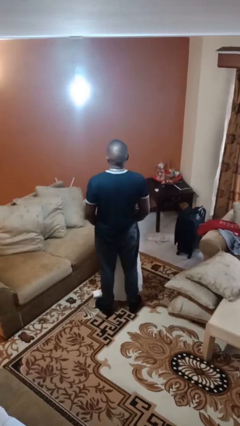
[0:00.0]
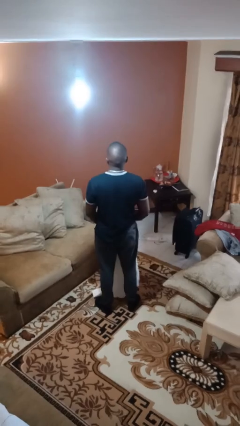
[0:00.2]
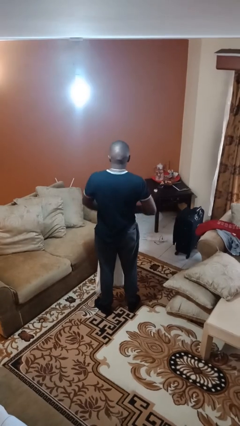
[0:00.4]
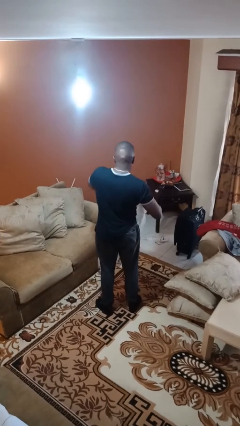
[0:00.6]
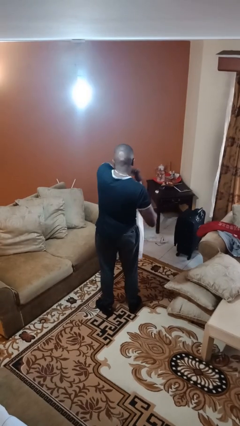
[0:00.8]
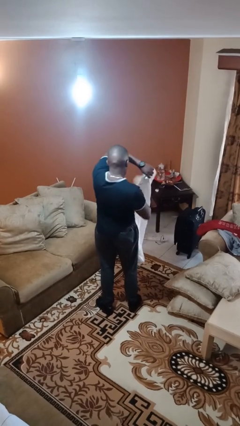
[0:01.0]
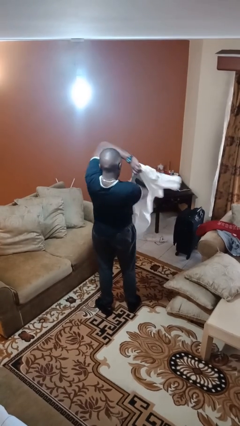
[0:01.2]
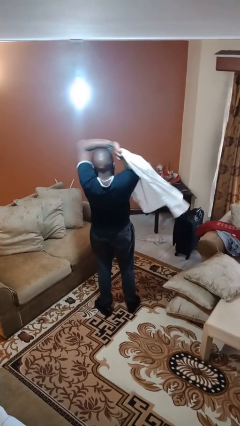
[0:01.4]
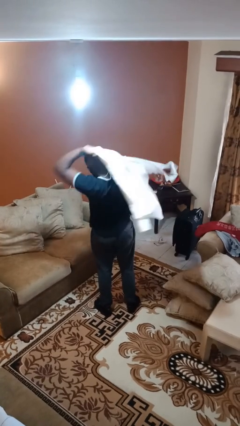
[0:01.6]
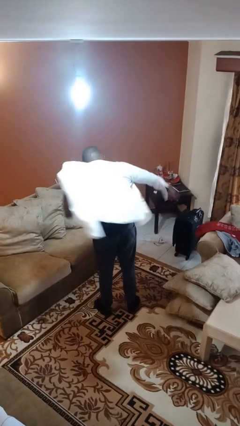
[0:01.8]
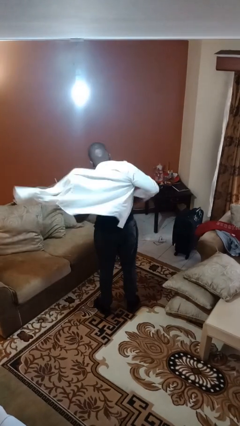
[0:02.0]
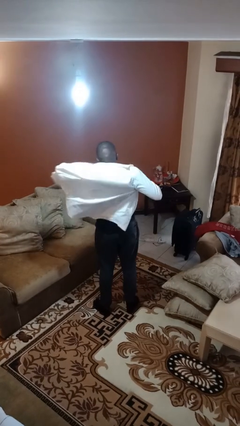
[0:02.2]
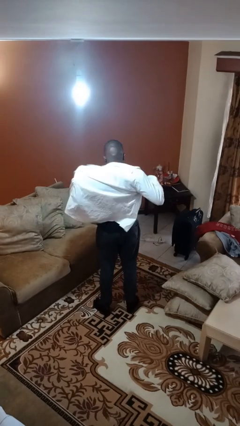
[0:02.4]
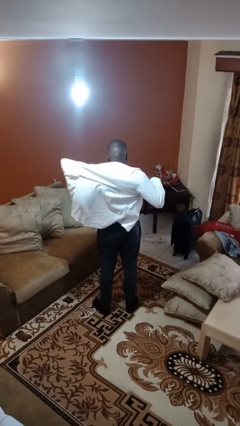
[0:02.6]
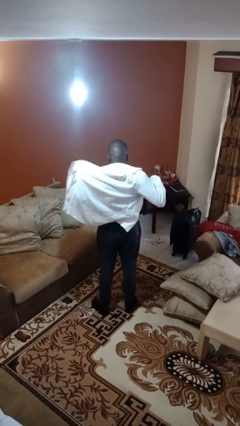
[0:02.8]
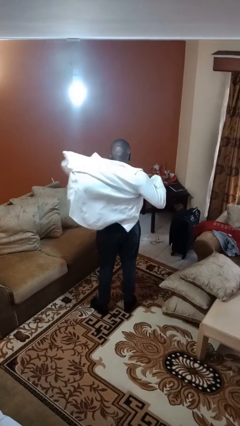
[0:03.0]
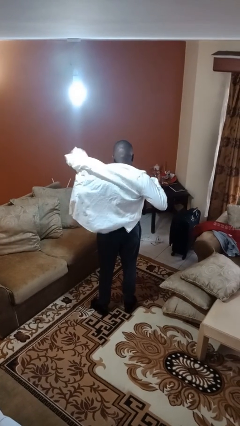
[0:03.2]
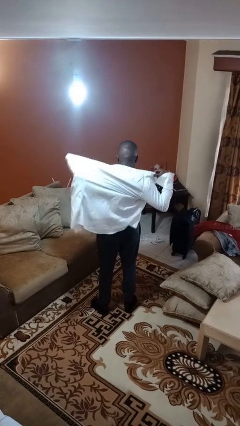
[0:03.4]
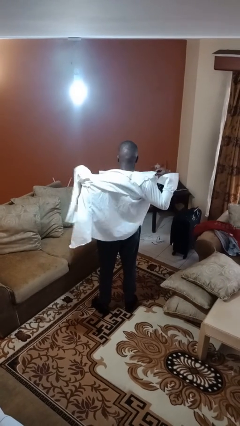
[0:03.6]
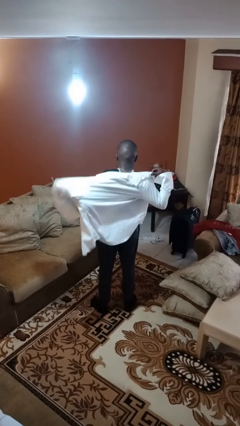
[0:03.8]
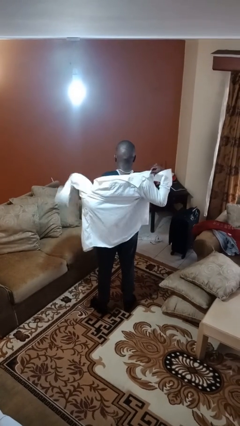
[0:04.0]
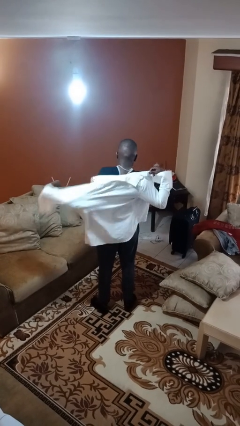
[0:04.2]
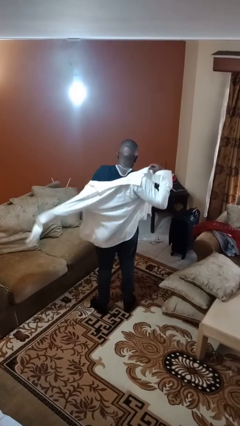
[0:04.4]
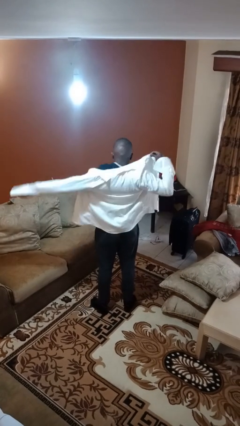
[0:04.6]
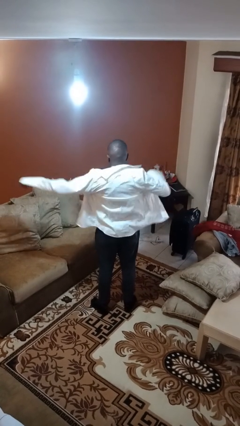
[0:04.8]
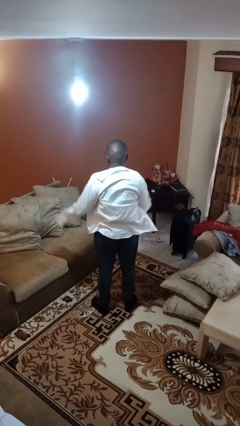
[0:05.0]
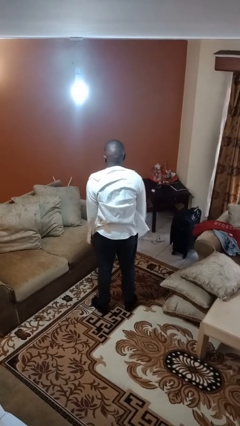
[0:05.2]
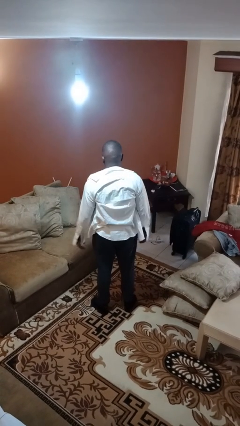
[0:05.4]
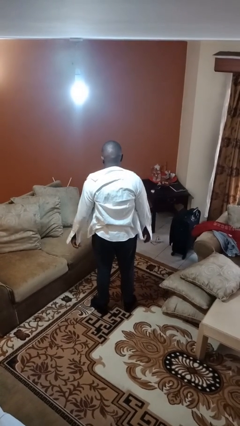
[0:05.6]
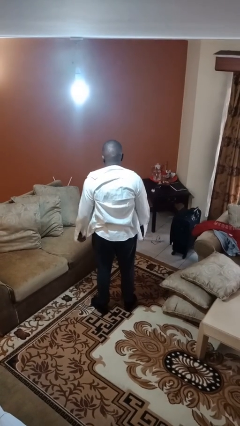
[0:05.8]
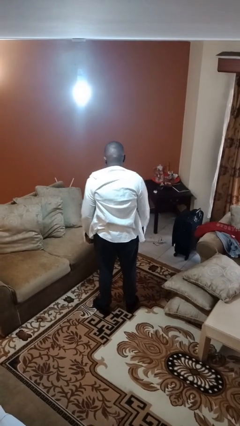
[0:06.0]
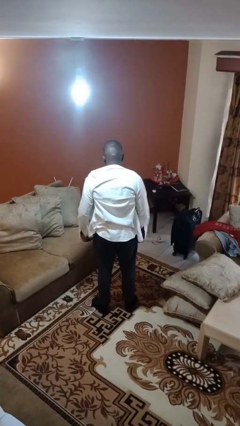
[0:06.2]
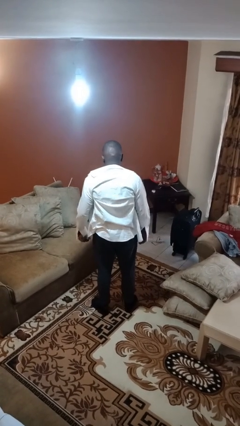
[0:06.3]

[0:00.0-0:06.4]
person puts on shirt

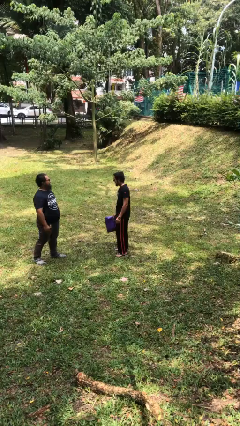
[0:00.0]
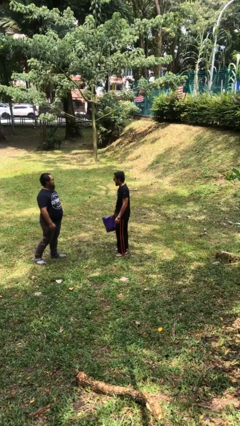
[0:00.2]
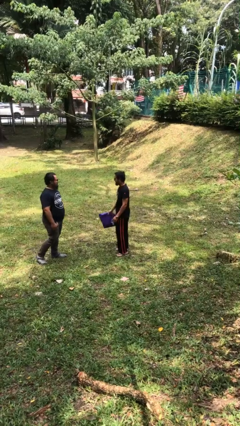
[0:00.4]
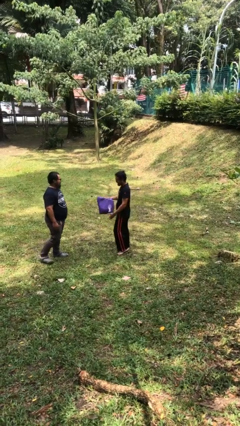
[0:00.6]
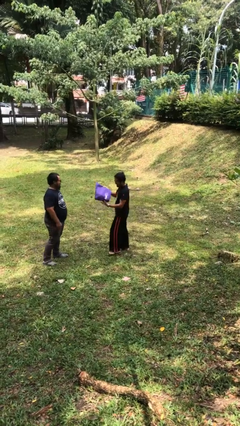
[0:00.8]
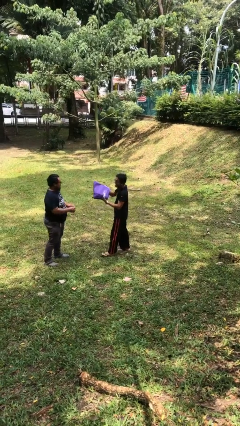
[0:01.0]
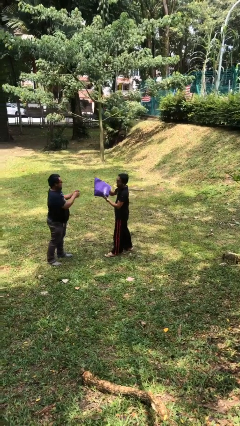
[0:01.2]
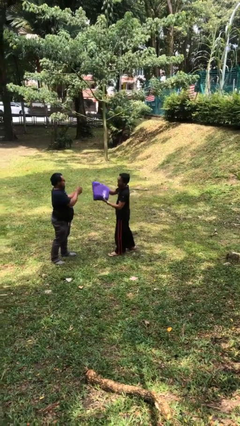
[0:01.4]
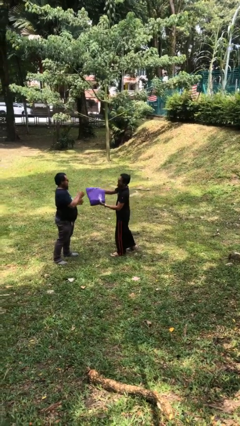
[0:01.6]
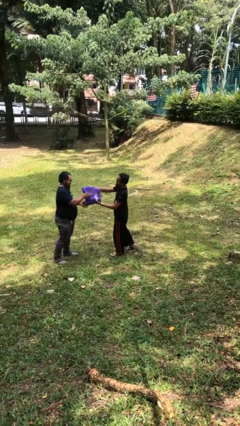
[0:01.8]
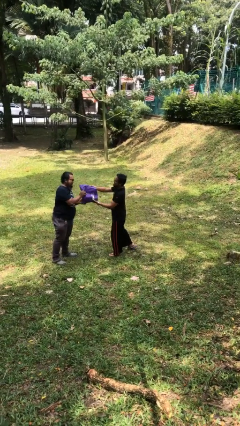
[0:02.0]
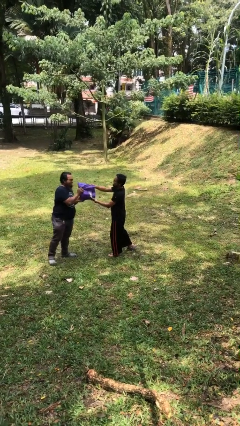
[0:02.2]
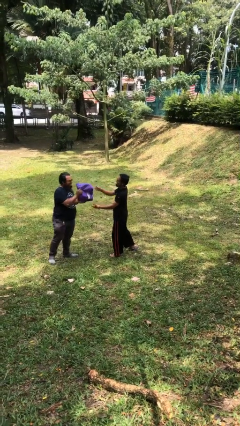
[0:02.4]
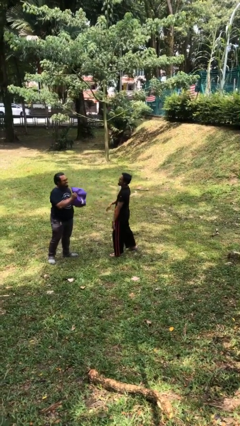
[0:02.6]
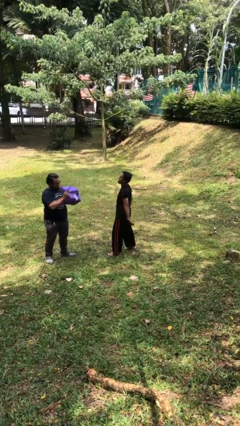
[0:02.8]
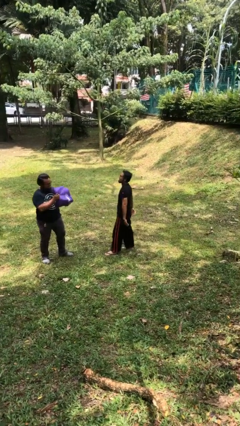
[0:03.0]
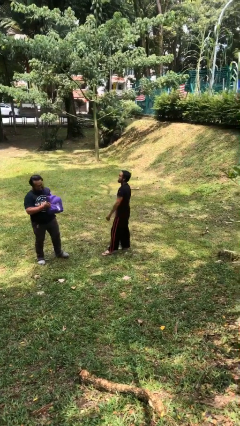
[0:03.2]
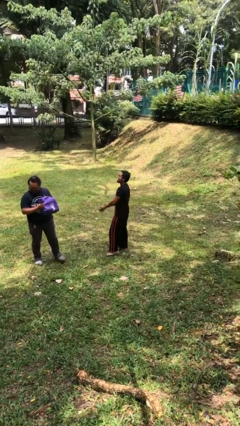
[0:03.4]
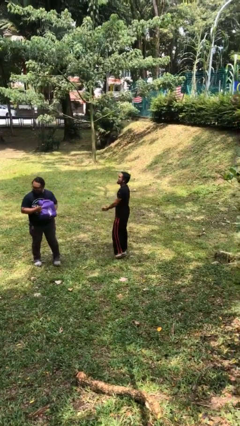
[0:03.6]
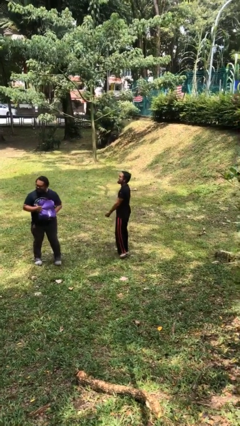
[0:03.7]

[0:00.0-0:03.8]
person transfers object to person

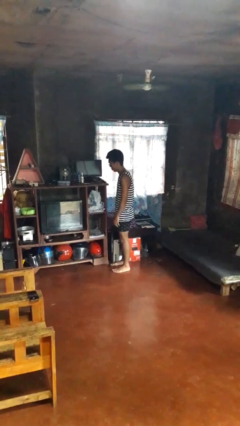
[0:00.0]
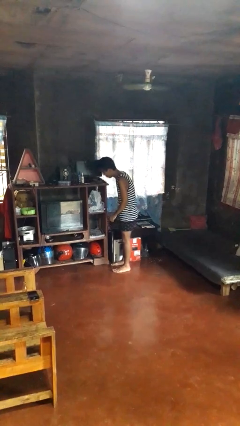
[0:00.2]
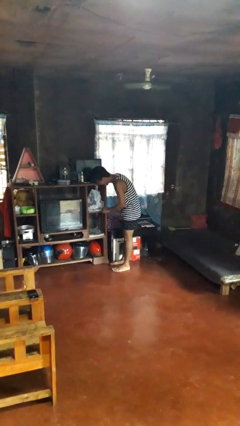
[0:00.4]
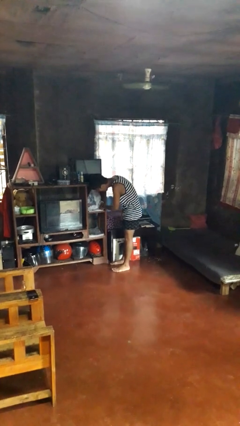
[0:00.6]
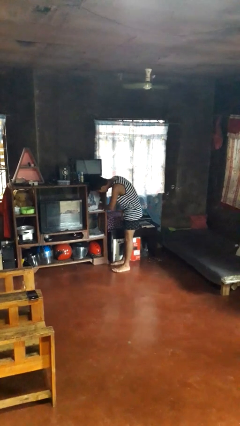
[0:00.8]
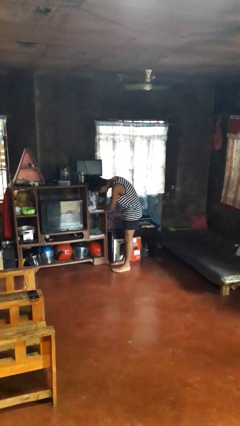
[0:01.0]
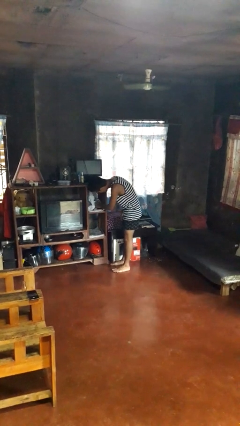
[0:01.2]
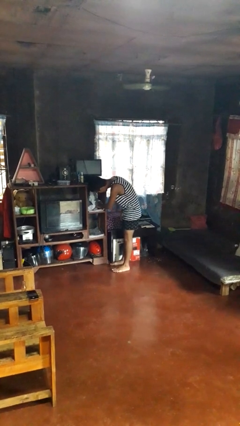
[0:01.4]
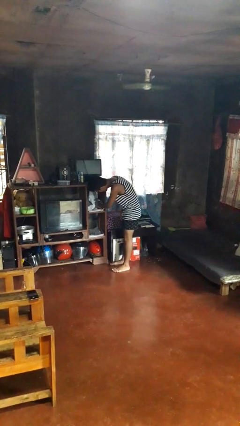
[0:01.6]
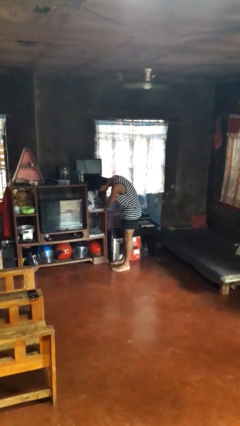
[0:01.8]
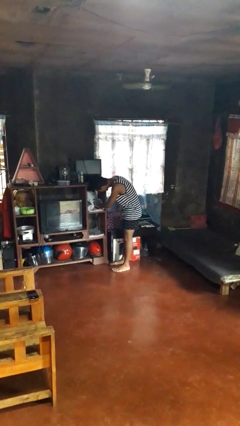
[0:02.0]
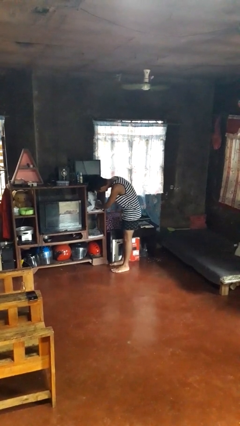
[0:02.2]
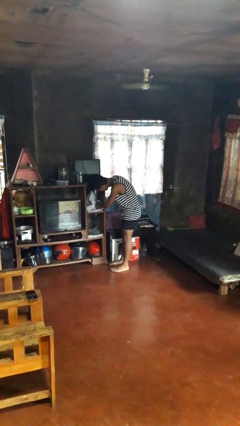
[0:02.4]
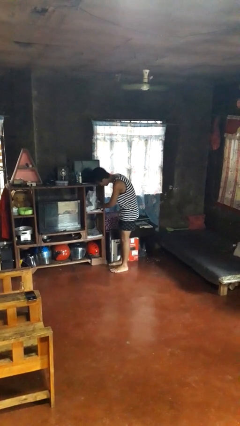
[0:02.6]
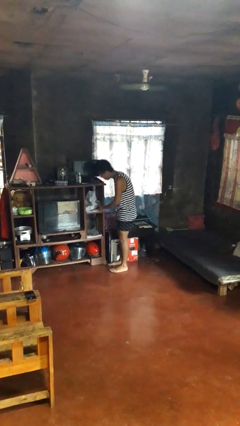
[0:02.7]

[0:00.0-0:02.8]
person searches in cabinet

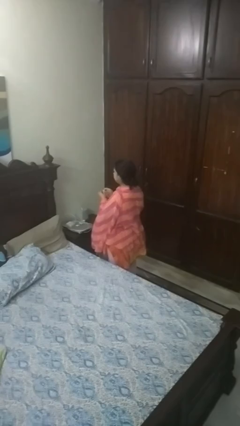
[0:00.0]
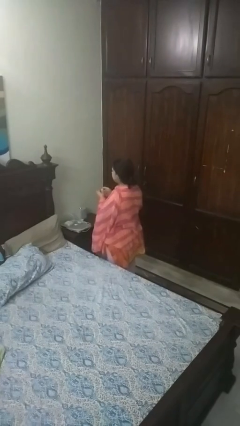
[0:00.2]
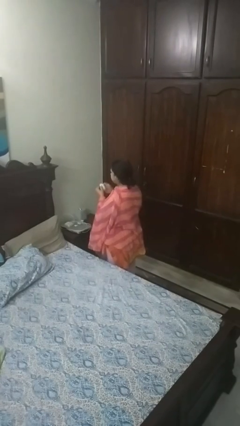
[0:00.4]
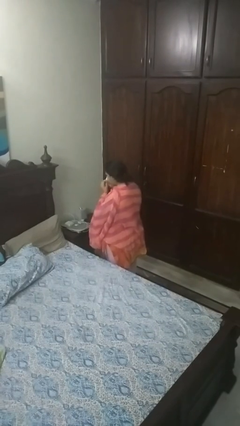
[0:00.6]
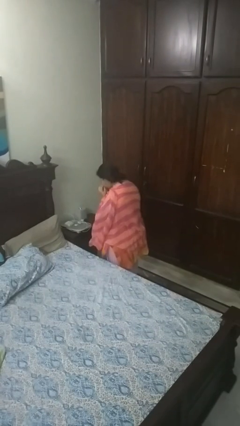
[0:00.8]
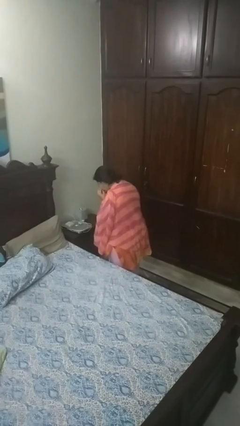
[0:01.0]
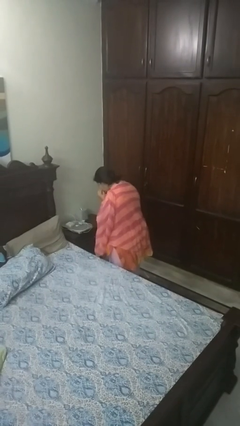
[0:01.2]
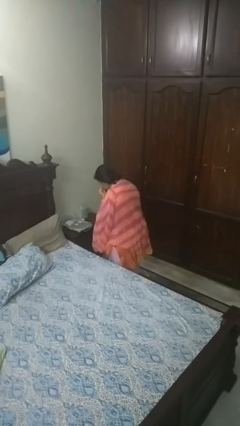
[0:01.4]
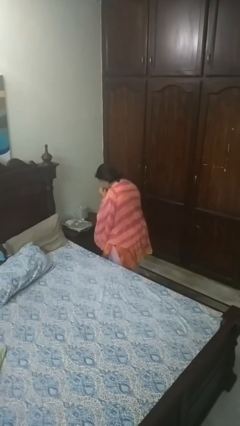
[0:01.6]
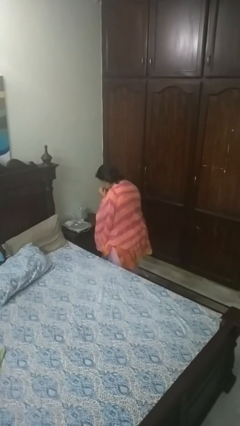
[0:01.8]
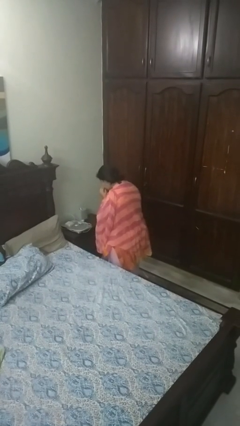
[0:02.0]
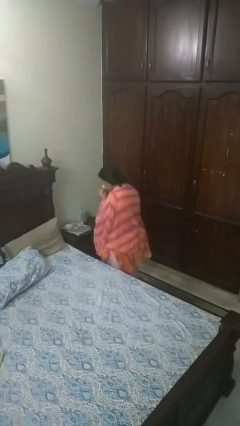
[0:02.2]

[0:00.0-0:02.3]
person blows nose

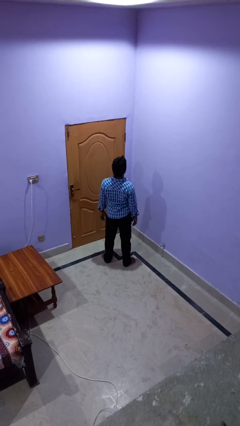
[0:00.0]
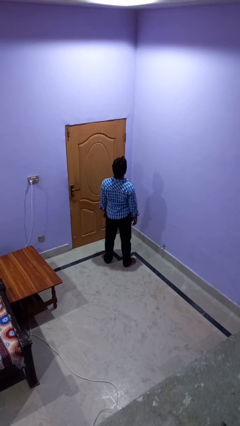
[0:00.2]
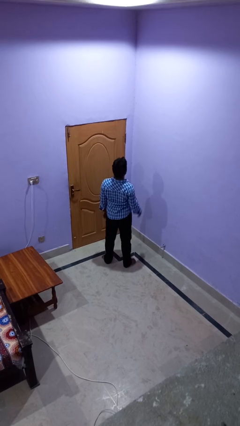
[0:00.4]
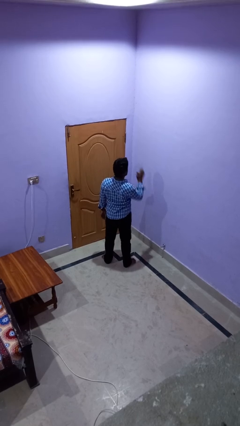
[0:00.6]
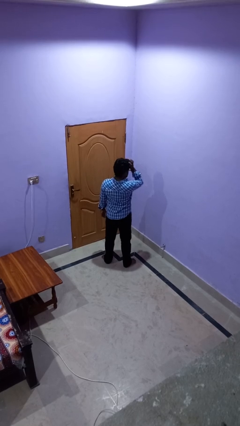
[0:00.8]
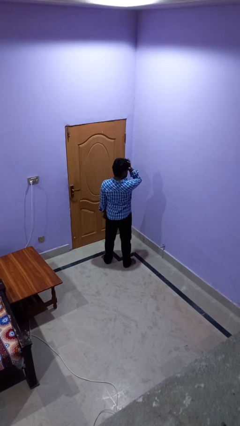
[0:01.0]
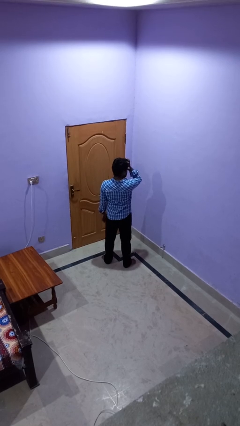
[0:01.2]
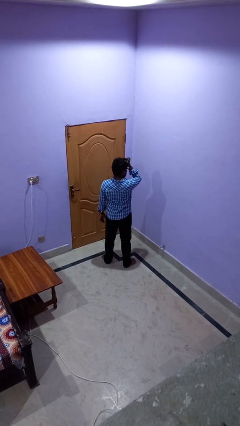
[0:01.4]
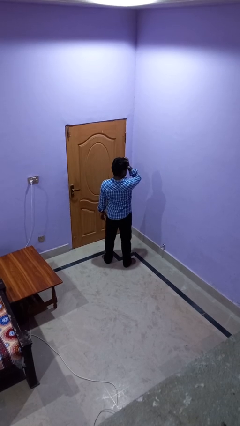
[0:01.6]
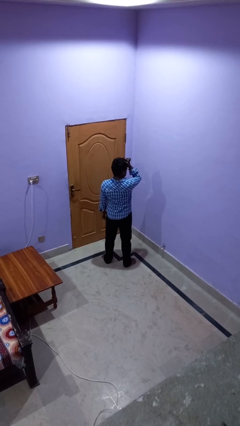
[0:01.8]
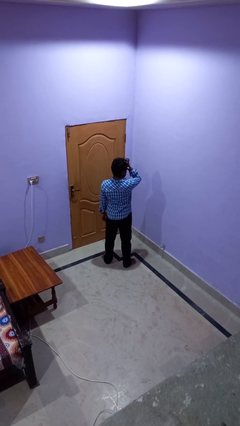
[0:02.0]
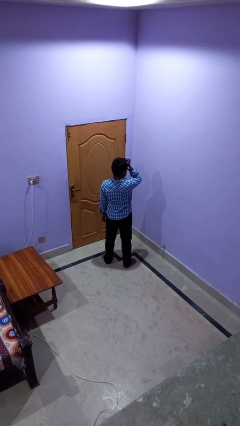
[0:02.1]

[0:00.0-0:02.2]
person rubs eyes

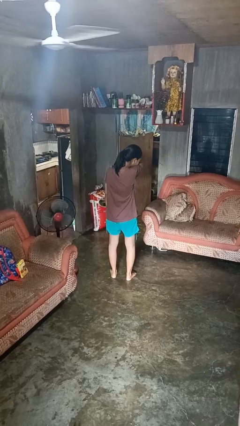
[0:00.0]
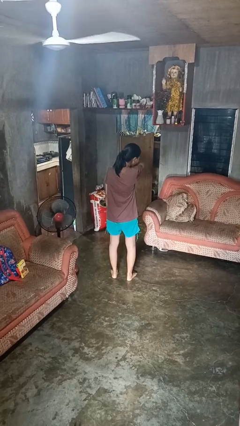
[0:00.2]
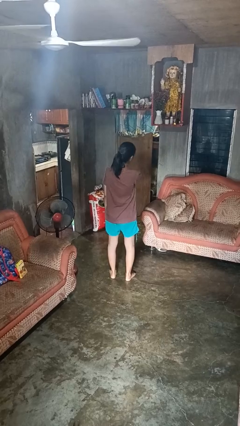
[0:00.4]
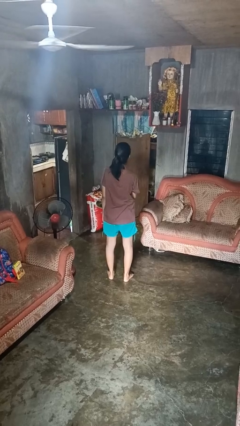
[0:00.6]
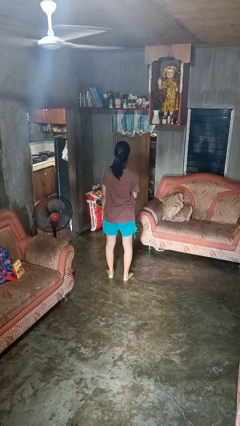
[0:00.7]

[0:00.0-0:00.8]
person sneezes into arm
